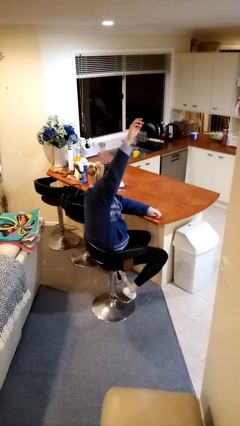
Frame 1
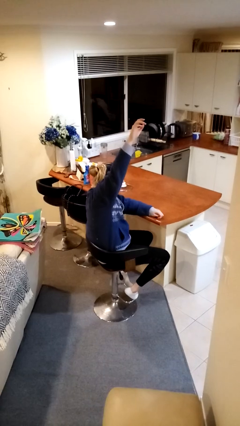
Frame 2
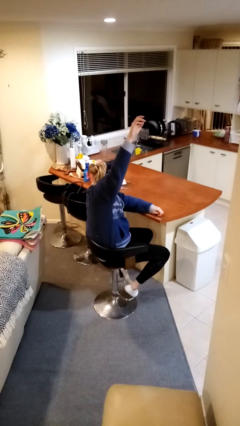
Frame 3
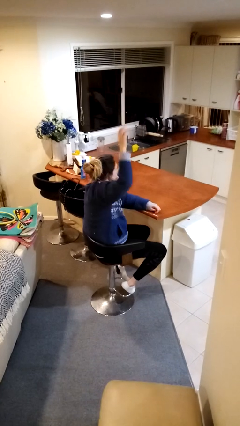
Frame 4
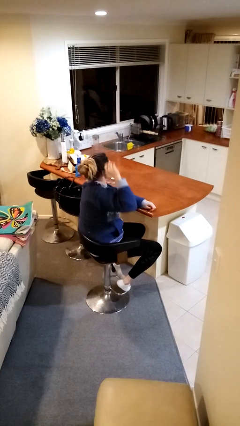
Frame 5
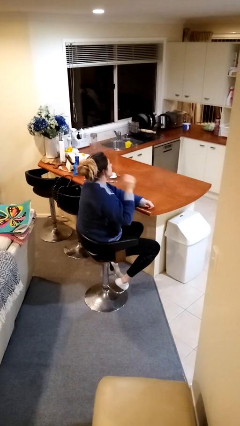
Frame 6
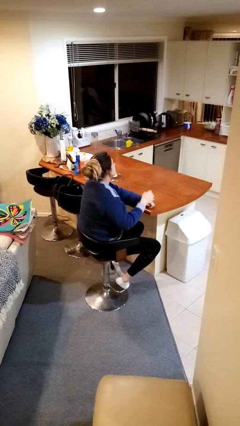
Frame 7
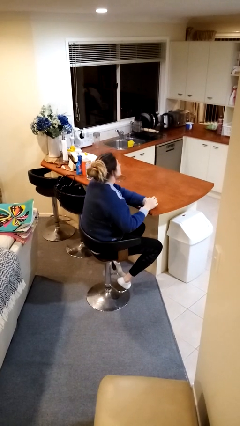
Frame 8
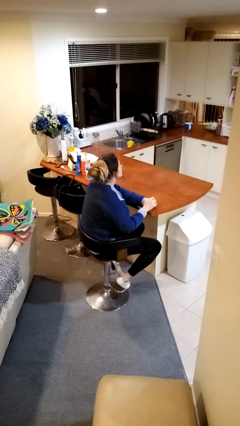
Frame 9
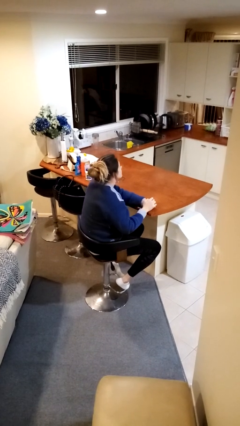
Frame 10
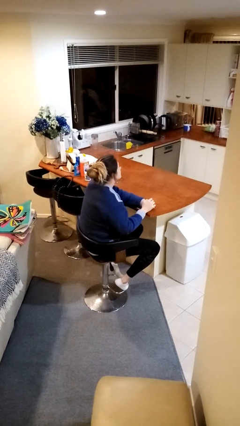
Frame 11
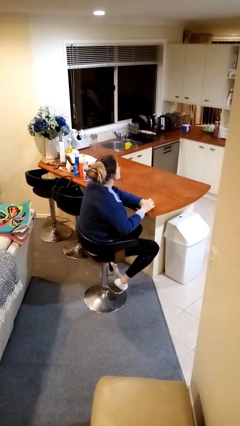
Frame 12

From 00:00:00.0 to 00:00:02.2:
person gestures lower hand

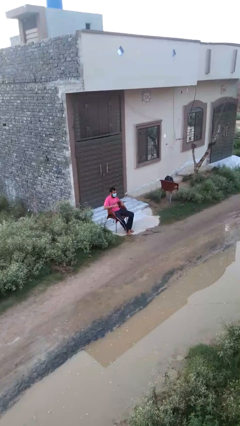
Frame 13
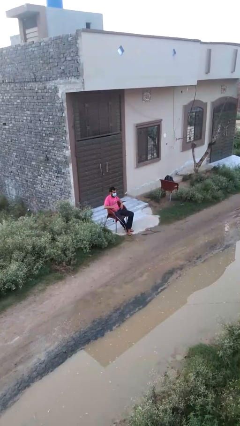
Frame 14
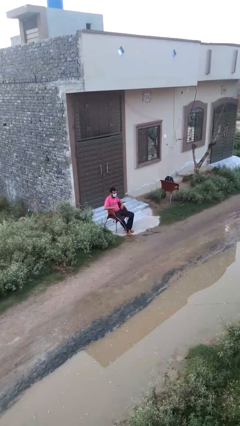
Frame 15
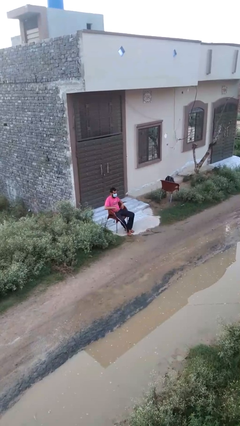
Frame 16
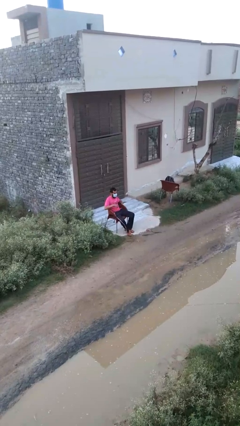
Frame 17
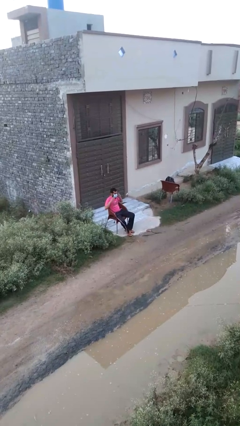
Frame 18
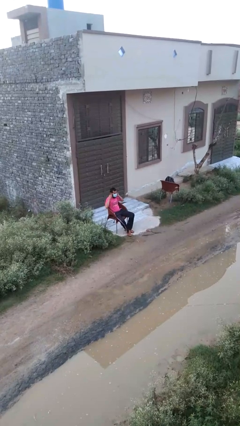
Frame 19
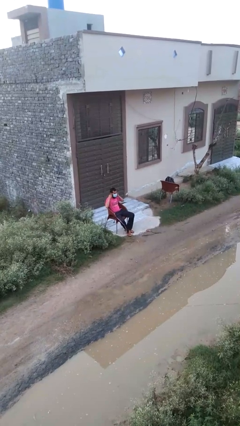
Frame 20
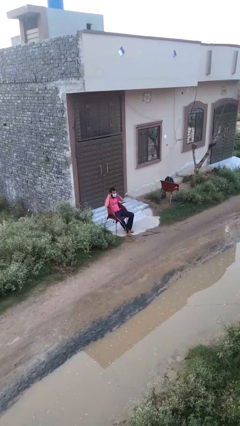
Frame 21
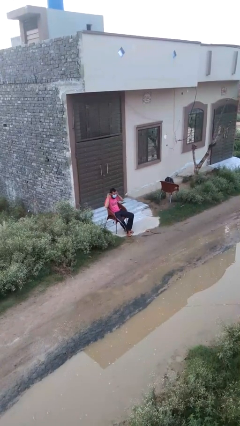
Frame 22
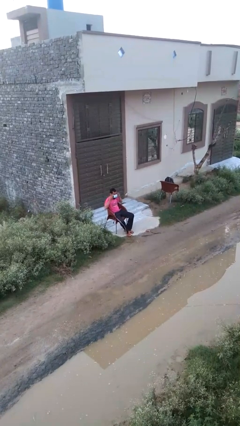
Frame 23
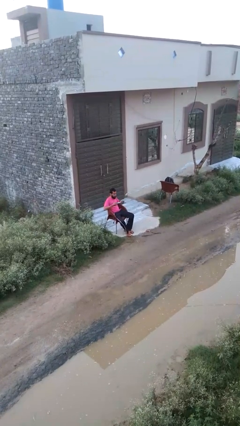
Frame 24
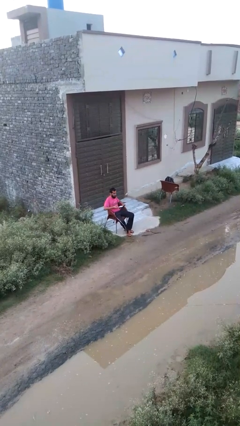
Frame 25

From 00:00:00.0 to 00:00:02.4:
person takes off facemask

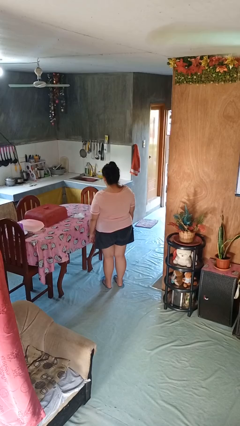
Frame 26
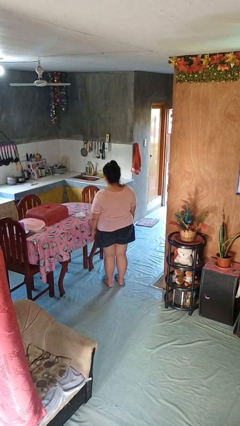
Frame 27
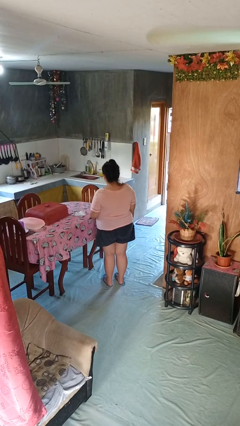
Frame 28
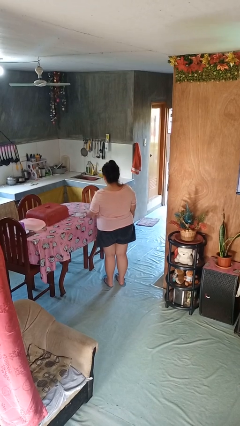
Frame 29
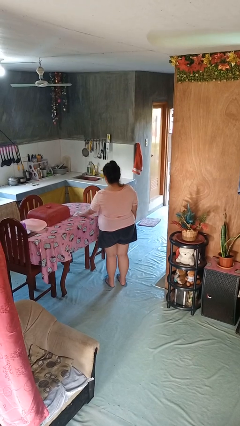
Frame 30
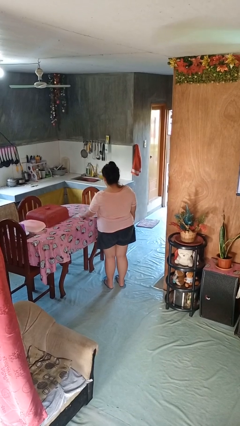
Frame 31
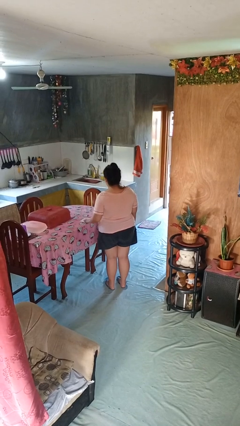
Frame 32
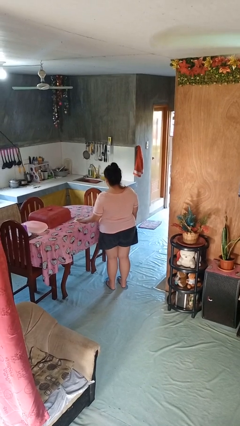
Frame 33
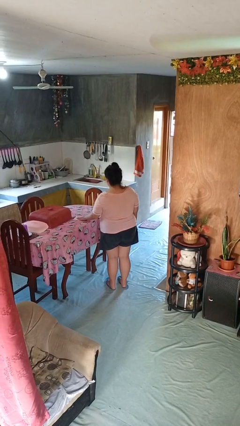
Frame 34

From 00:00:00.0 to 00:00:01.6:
person cleans table with rag

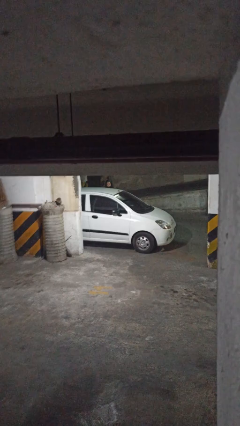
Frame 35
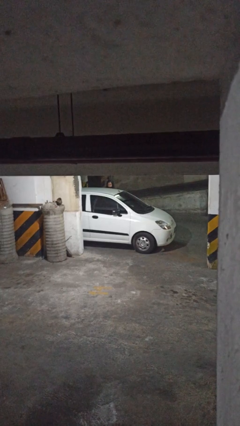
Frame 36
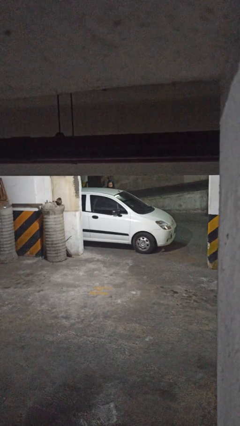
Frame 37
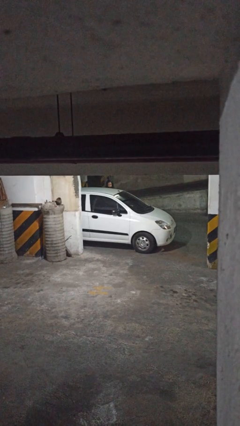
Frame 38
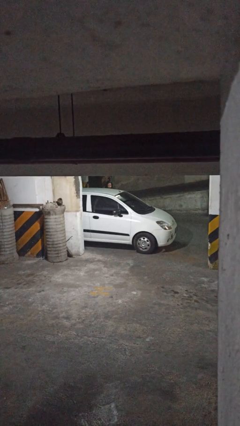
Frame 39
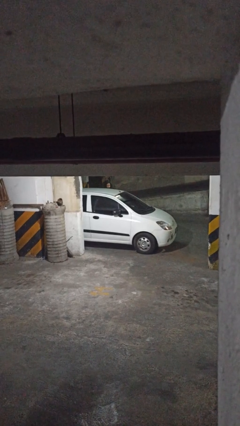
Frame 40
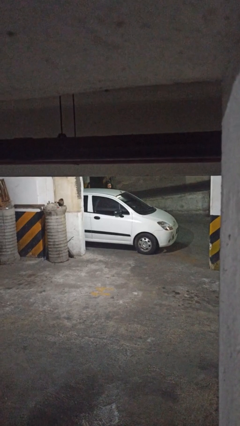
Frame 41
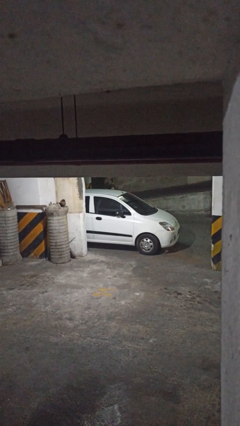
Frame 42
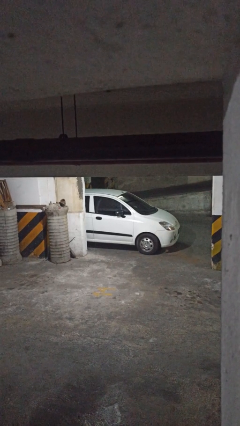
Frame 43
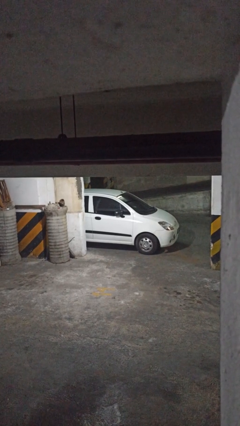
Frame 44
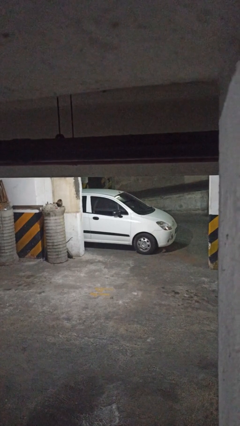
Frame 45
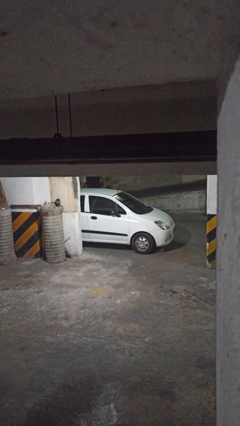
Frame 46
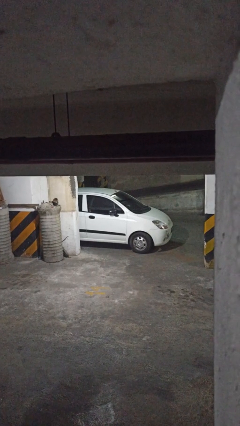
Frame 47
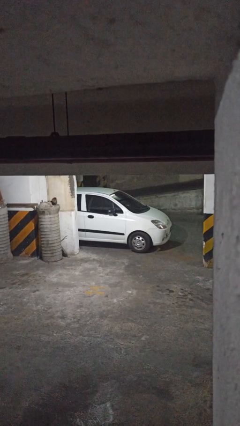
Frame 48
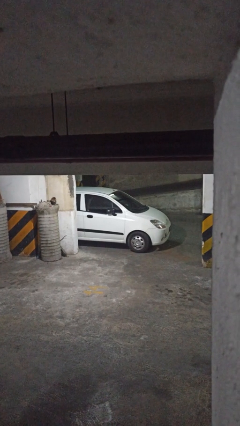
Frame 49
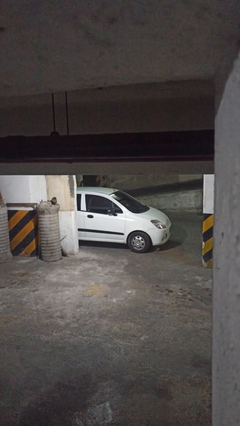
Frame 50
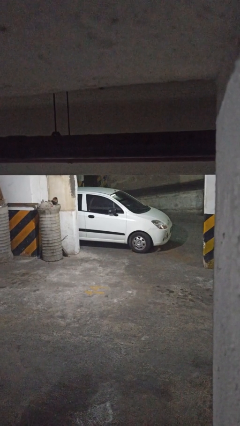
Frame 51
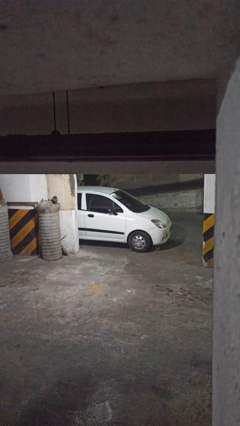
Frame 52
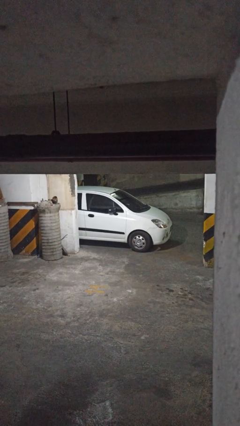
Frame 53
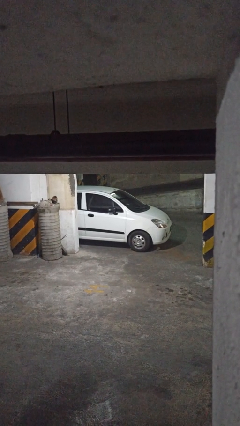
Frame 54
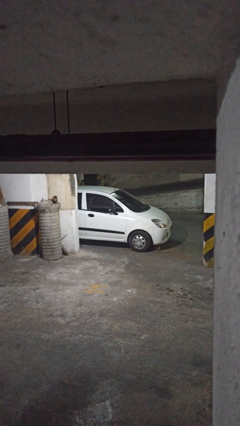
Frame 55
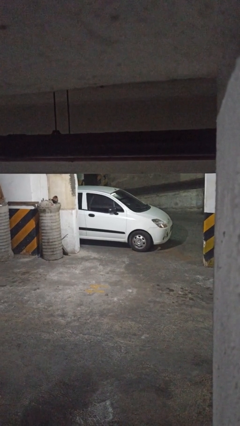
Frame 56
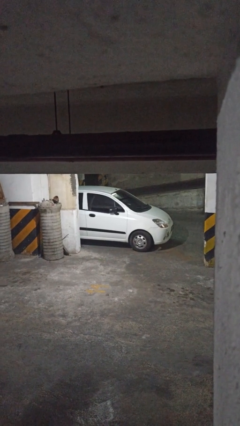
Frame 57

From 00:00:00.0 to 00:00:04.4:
car picks up person

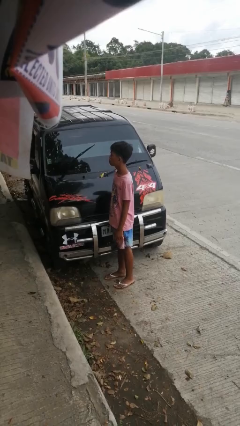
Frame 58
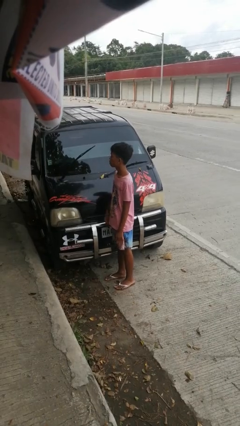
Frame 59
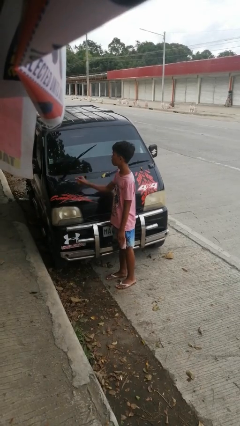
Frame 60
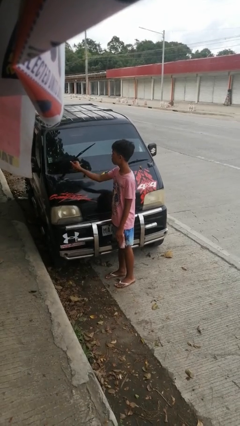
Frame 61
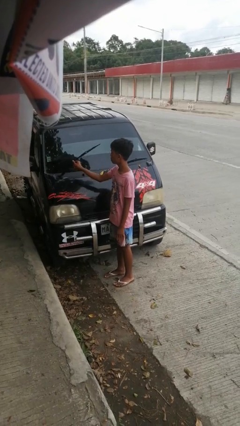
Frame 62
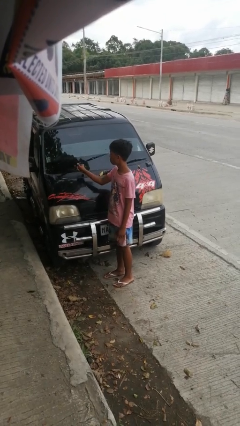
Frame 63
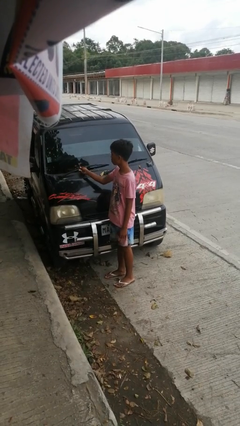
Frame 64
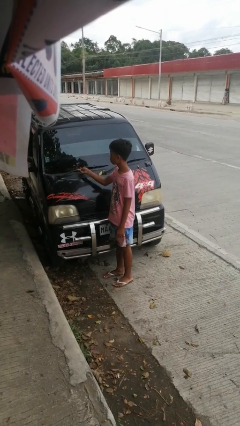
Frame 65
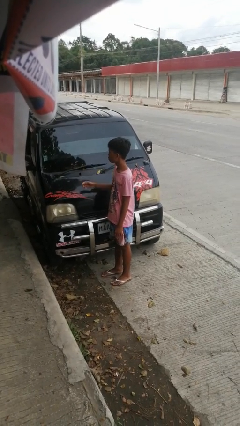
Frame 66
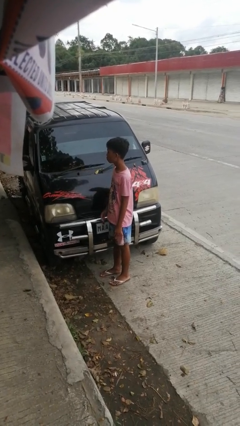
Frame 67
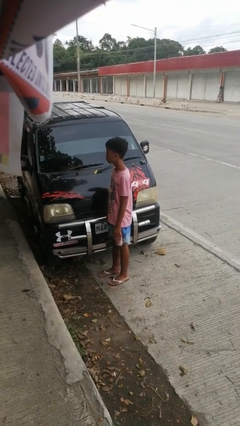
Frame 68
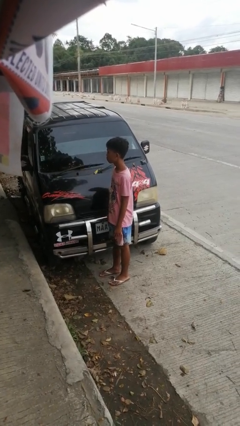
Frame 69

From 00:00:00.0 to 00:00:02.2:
person flips down car wipers

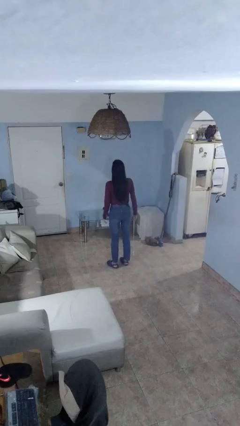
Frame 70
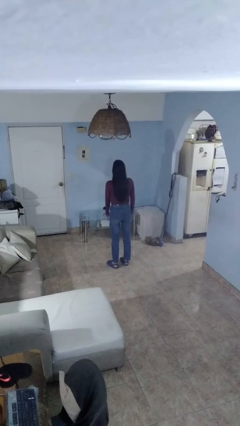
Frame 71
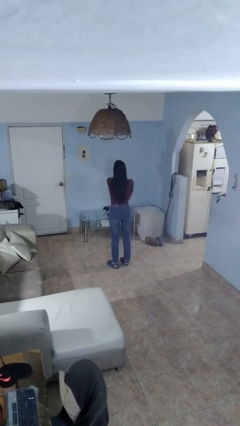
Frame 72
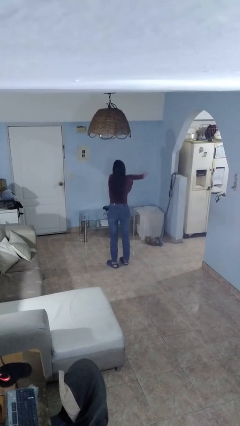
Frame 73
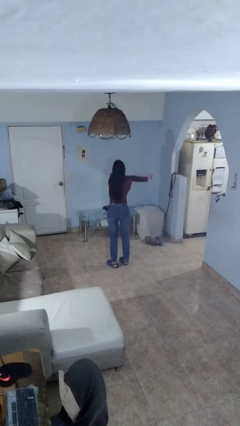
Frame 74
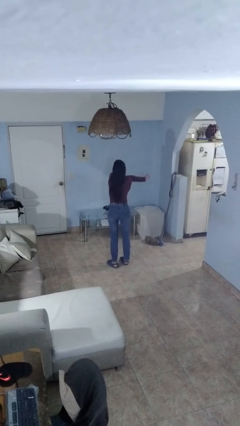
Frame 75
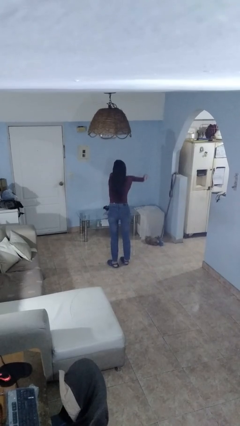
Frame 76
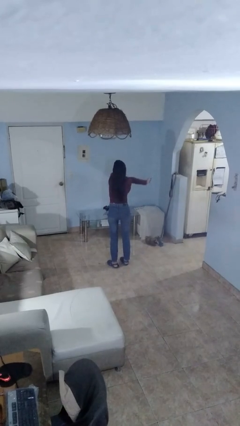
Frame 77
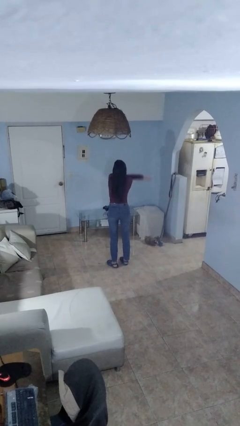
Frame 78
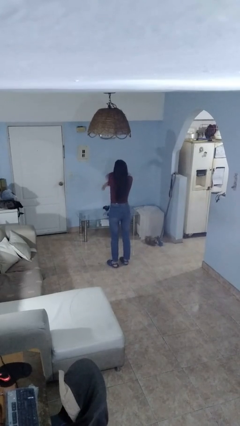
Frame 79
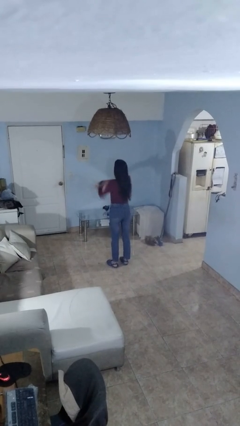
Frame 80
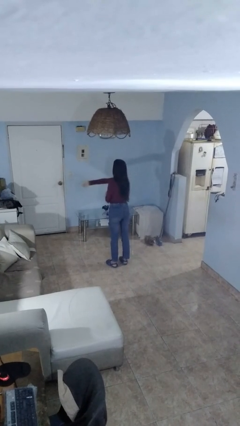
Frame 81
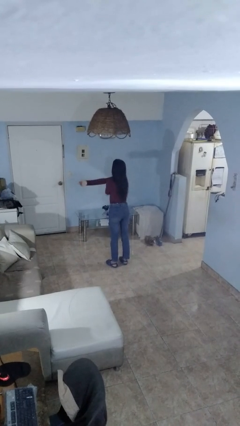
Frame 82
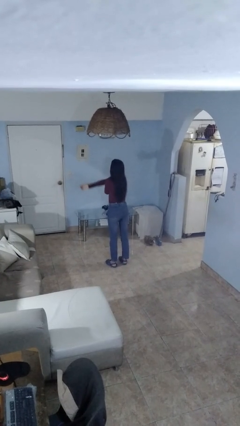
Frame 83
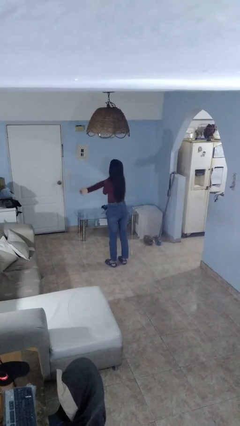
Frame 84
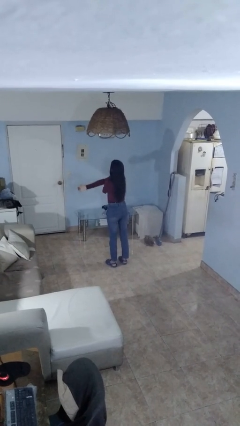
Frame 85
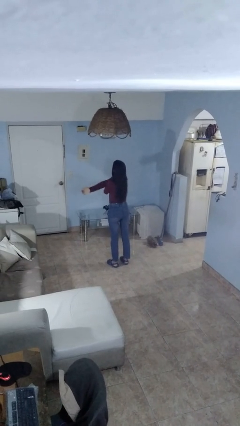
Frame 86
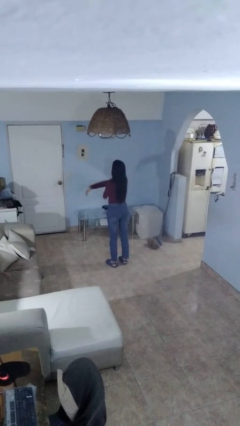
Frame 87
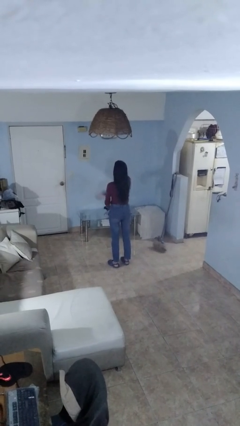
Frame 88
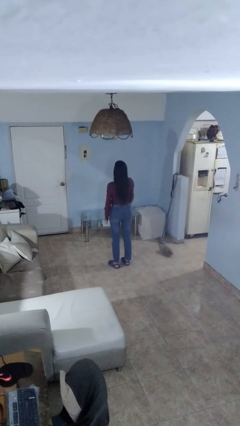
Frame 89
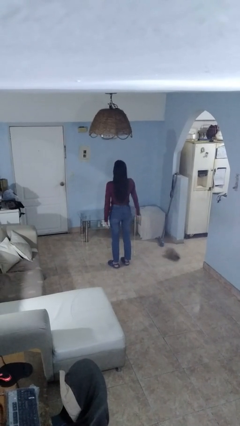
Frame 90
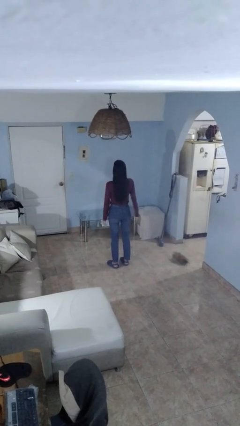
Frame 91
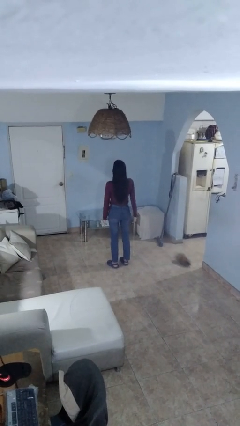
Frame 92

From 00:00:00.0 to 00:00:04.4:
person stretches arms to side
